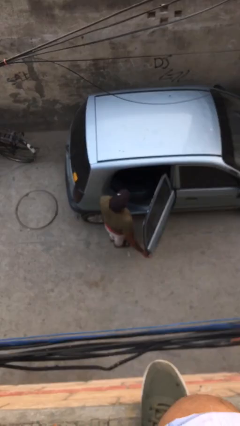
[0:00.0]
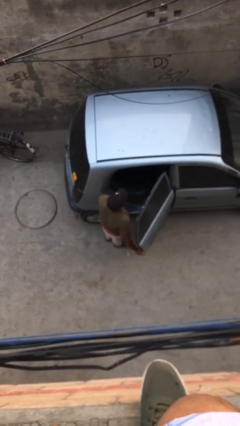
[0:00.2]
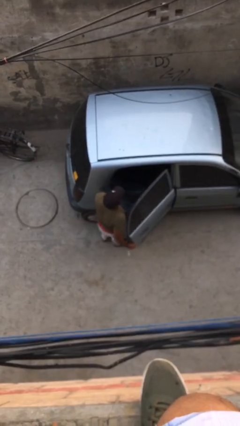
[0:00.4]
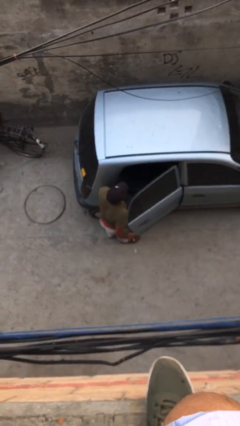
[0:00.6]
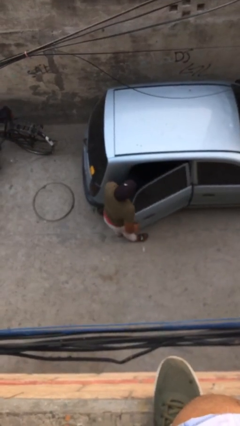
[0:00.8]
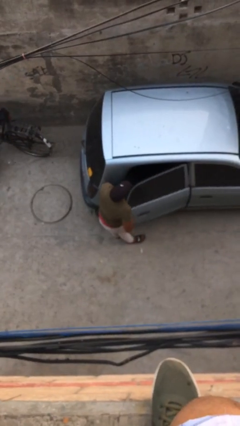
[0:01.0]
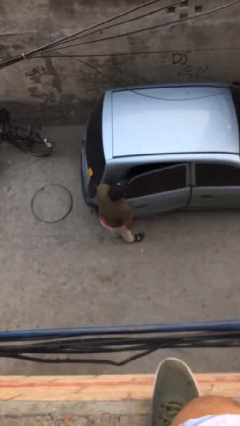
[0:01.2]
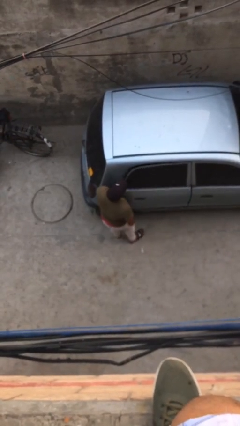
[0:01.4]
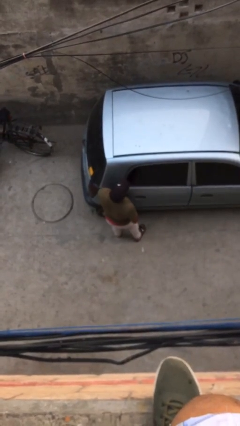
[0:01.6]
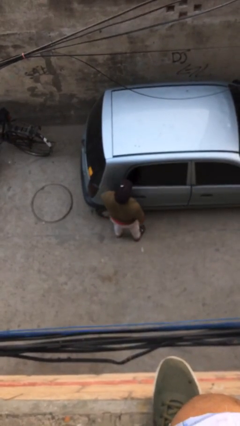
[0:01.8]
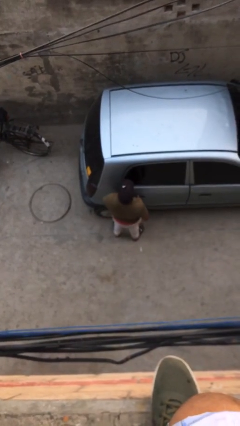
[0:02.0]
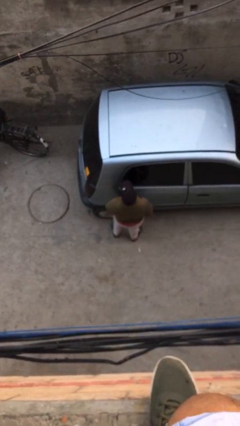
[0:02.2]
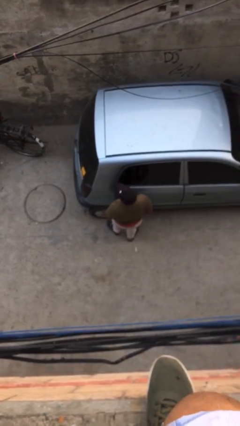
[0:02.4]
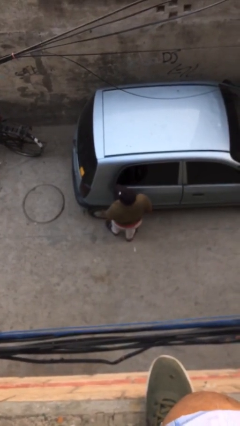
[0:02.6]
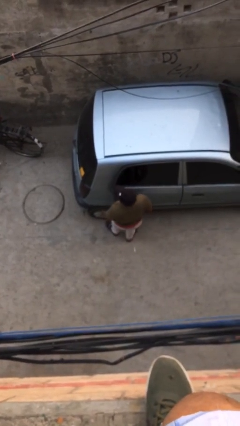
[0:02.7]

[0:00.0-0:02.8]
person closes car door

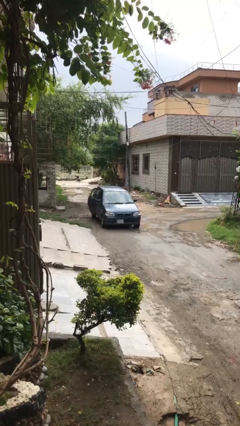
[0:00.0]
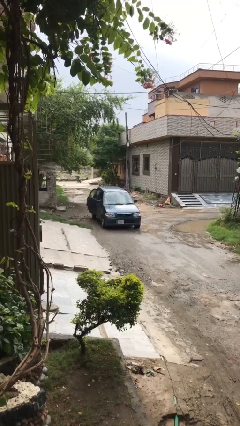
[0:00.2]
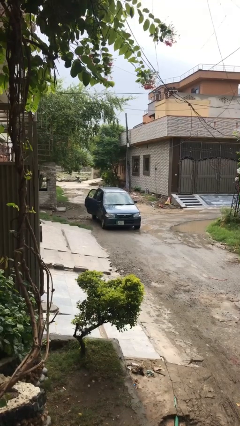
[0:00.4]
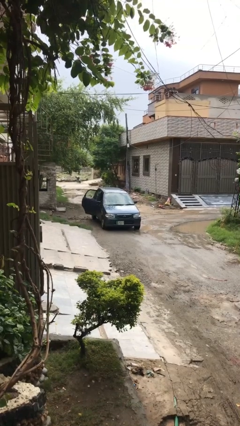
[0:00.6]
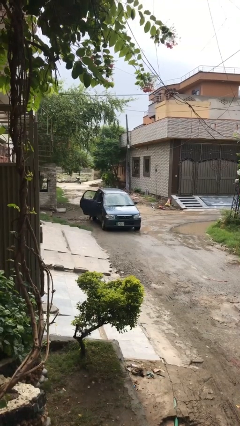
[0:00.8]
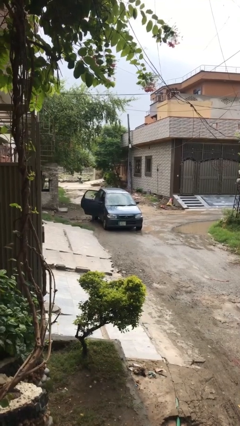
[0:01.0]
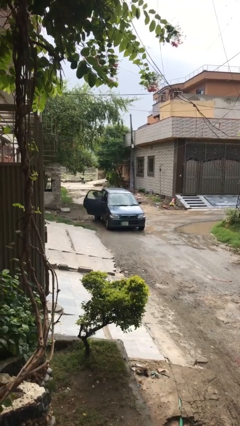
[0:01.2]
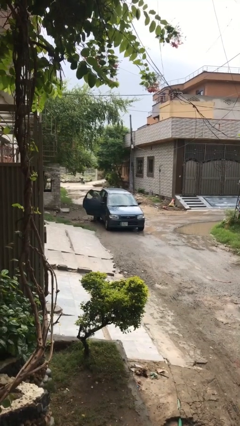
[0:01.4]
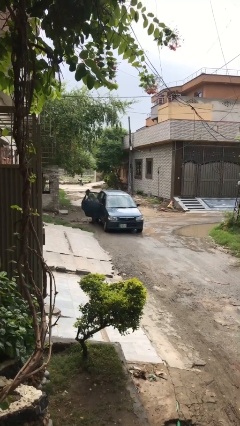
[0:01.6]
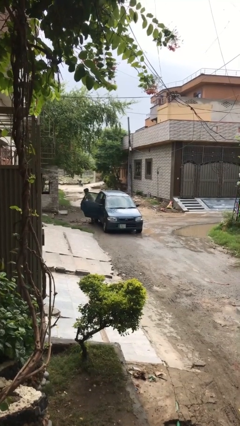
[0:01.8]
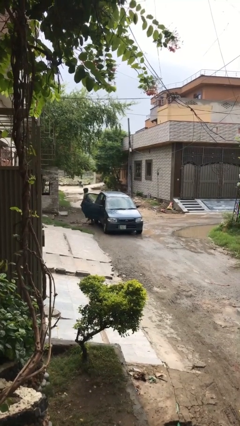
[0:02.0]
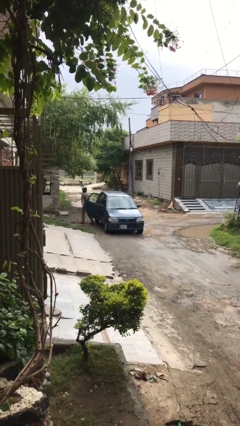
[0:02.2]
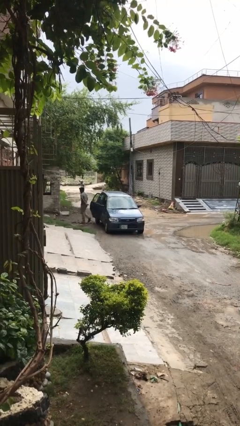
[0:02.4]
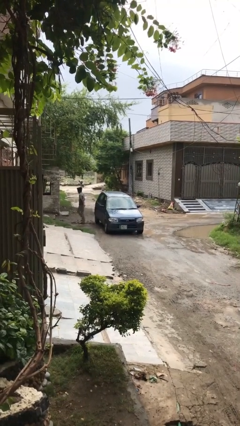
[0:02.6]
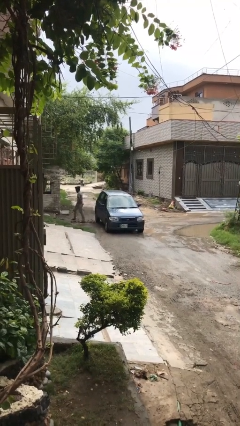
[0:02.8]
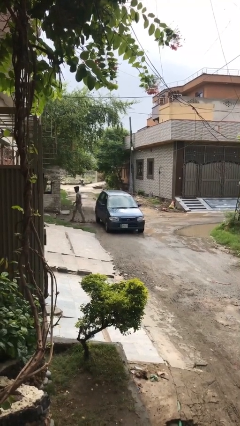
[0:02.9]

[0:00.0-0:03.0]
car drops off person

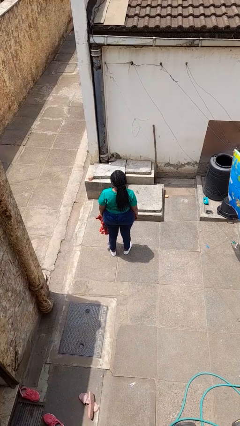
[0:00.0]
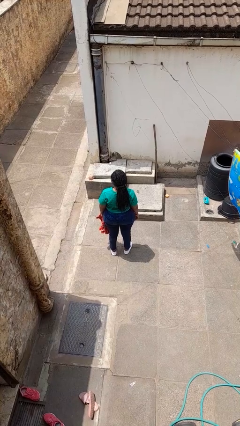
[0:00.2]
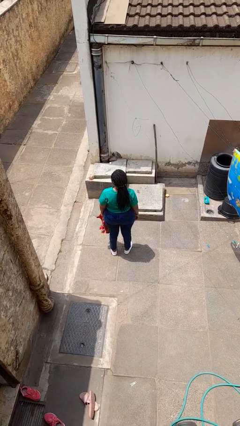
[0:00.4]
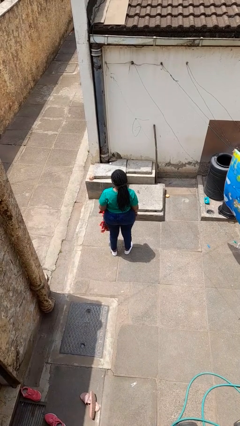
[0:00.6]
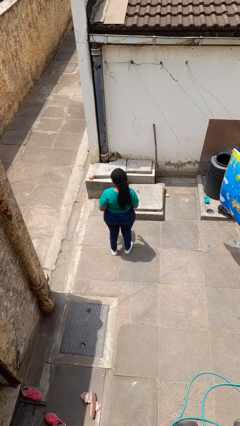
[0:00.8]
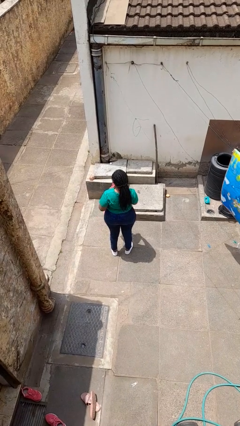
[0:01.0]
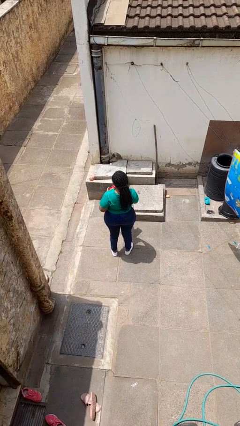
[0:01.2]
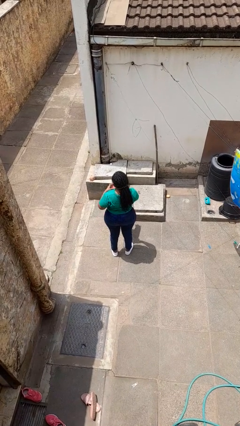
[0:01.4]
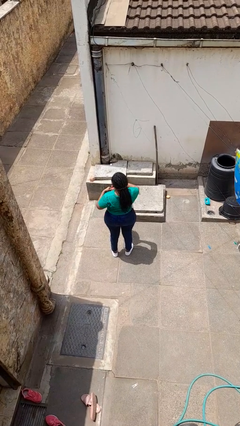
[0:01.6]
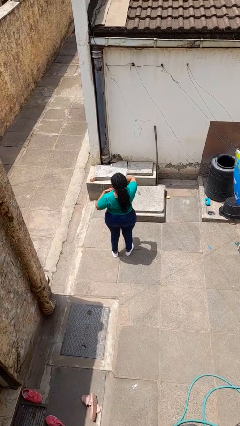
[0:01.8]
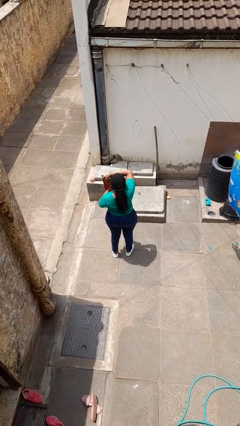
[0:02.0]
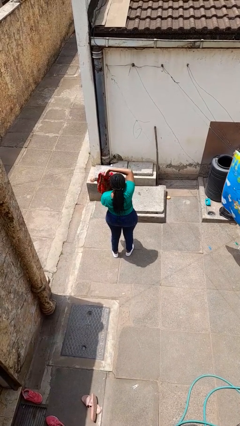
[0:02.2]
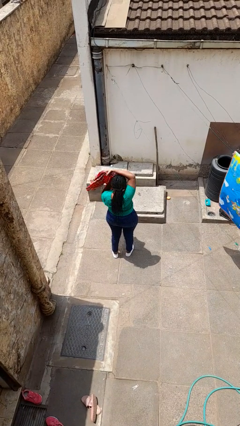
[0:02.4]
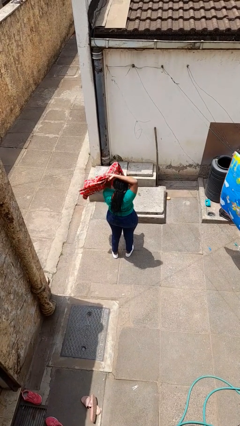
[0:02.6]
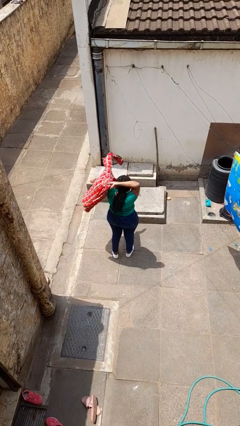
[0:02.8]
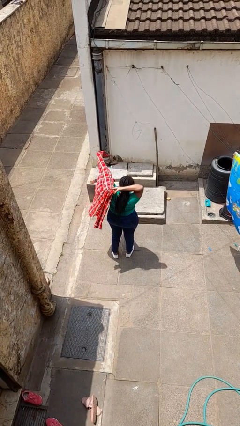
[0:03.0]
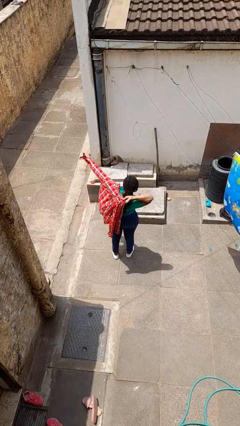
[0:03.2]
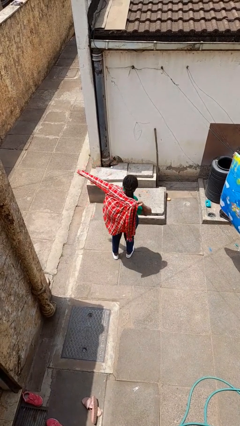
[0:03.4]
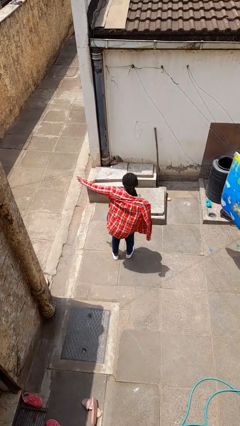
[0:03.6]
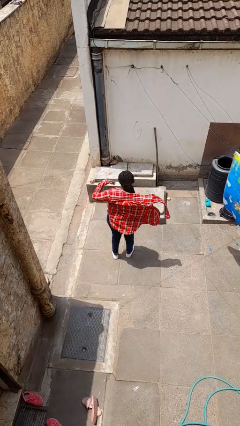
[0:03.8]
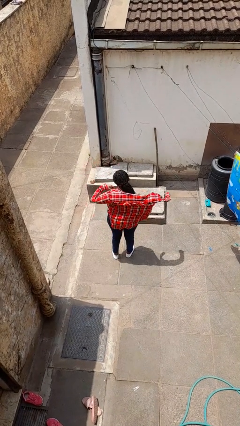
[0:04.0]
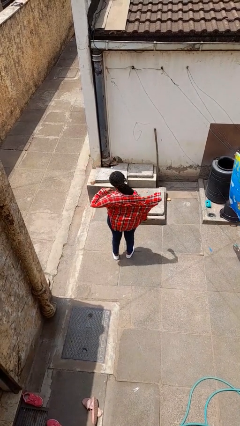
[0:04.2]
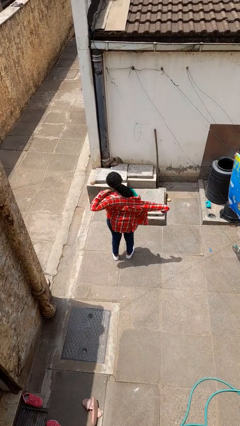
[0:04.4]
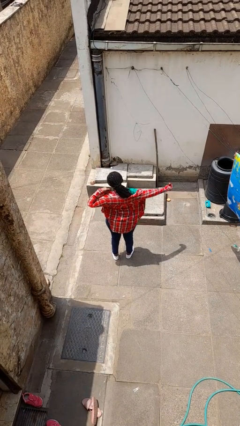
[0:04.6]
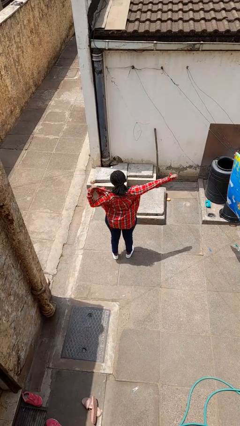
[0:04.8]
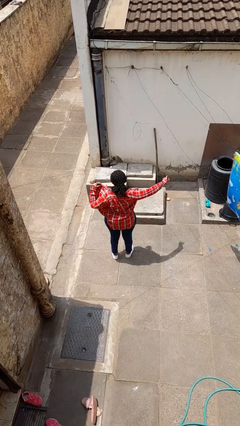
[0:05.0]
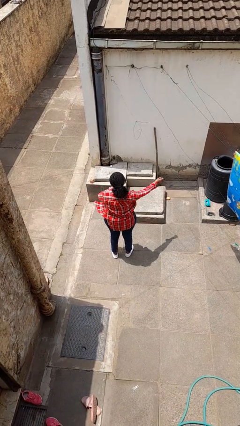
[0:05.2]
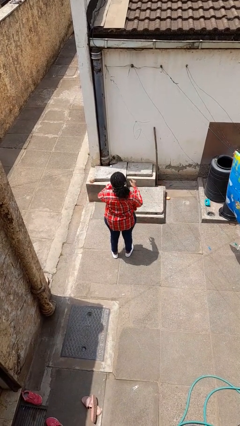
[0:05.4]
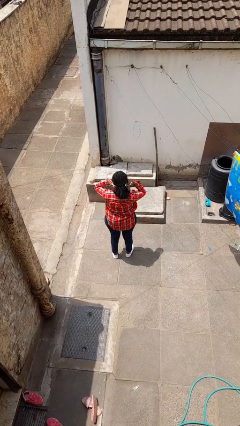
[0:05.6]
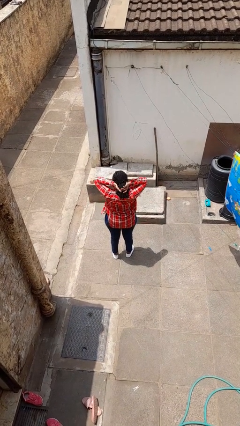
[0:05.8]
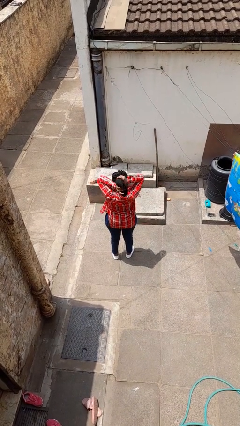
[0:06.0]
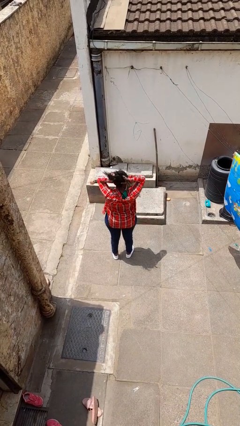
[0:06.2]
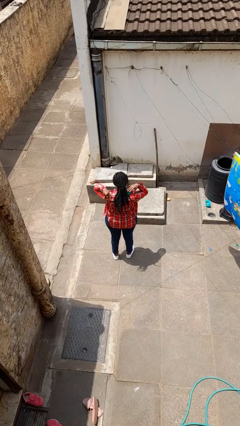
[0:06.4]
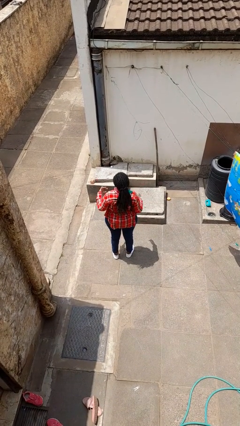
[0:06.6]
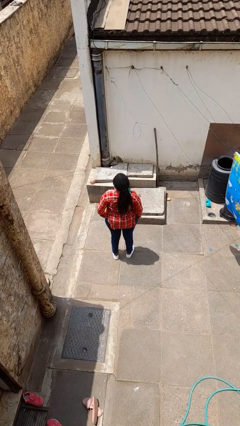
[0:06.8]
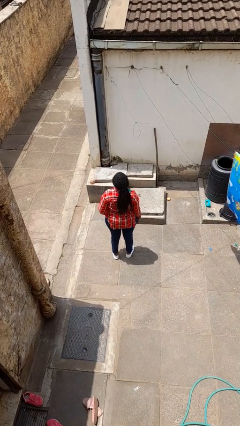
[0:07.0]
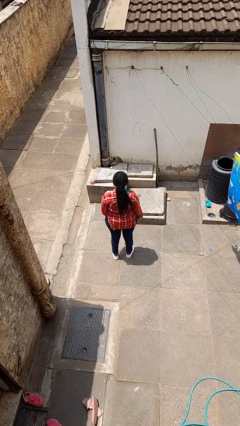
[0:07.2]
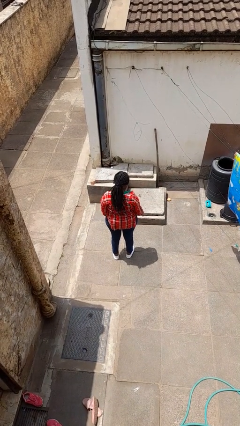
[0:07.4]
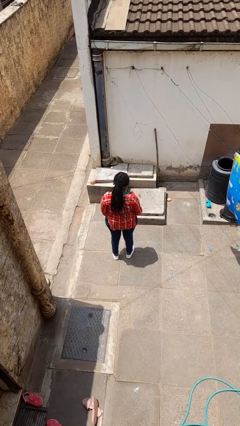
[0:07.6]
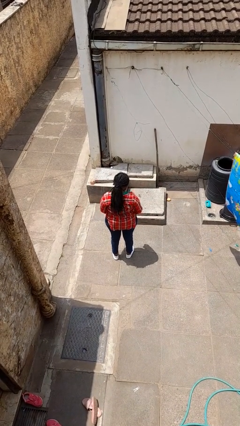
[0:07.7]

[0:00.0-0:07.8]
person puts on shirt

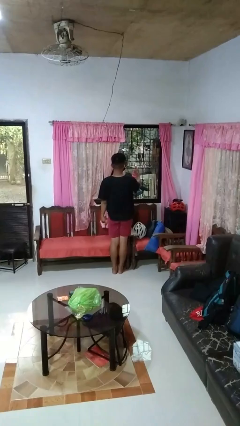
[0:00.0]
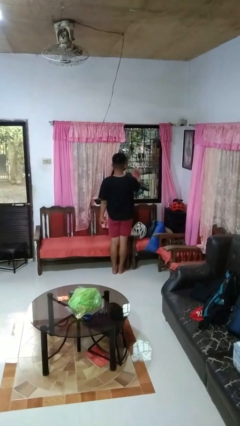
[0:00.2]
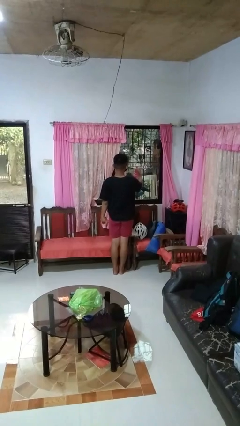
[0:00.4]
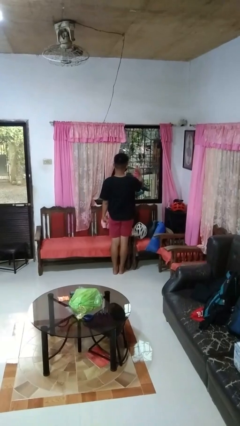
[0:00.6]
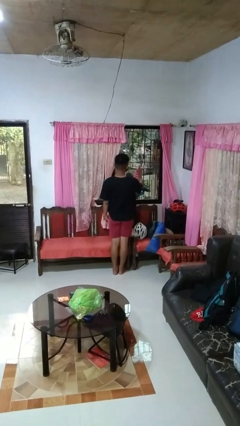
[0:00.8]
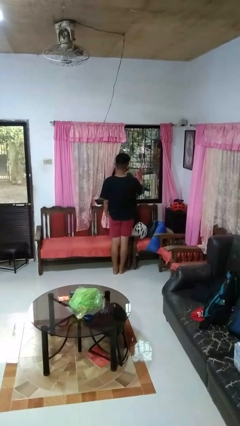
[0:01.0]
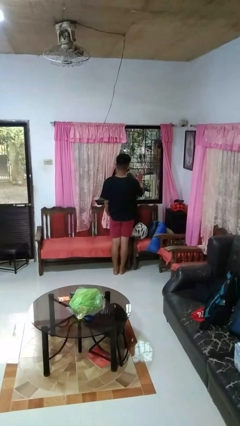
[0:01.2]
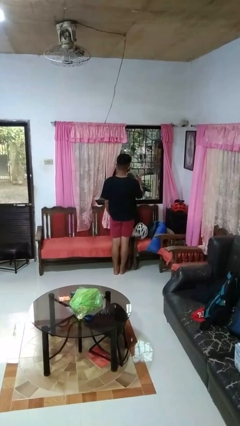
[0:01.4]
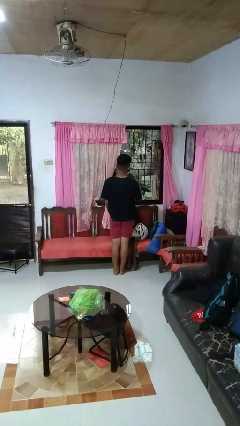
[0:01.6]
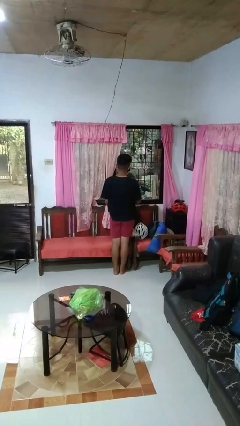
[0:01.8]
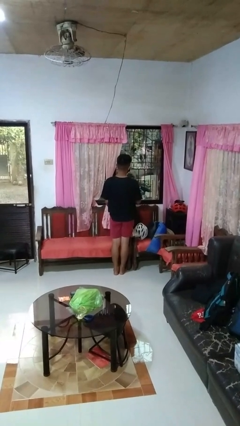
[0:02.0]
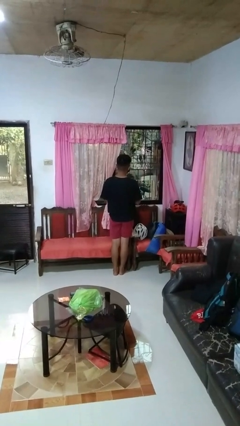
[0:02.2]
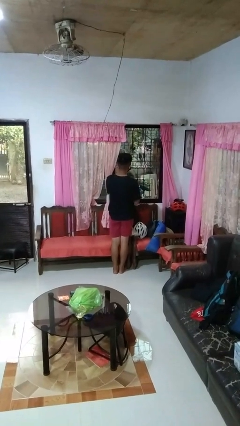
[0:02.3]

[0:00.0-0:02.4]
person sprays from bottle

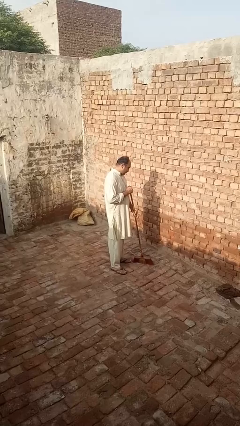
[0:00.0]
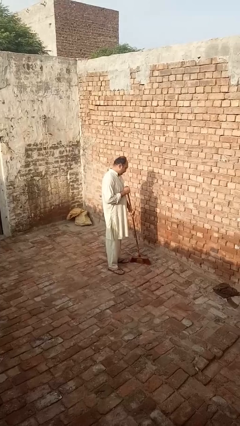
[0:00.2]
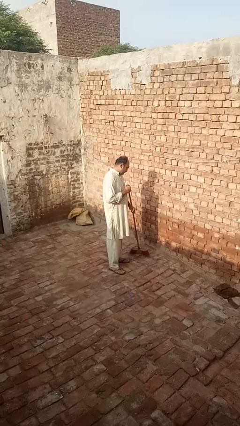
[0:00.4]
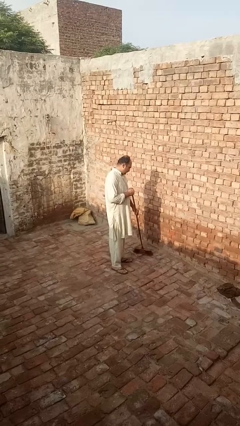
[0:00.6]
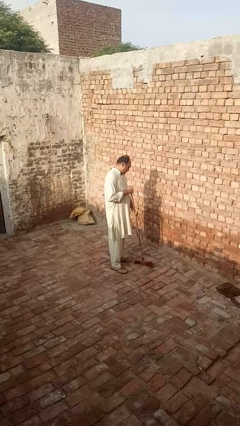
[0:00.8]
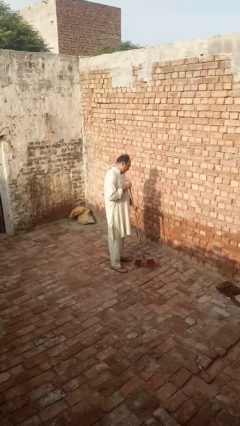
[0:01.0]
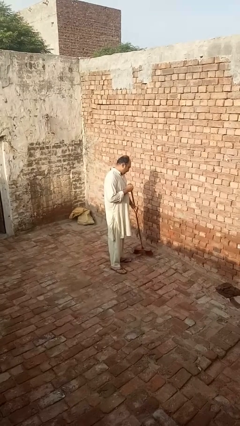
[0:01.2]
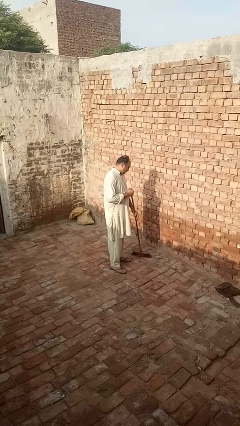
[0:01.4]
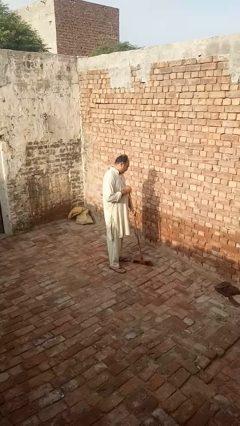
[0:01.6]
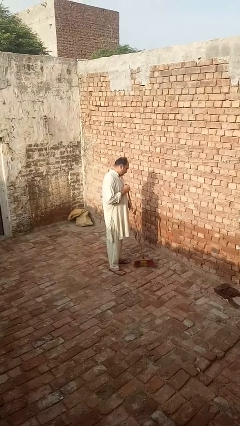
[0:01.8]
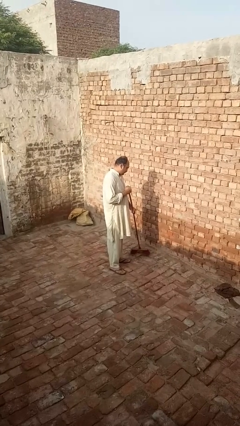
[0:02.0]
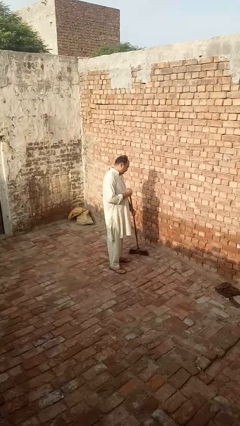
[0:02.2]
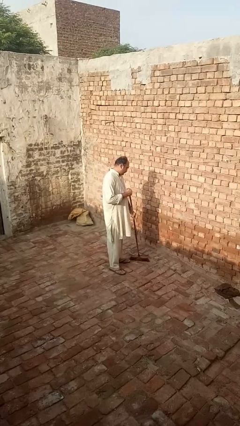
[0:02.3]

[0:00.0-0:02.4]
person sweeps floor
